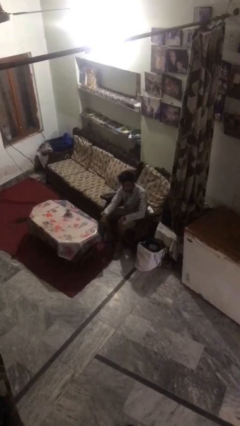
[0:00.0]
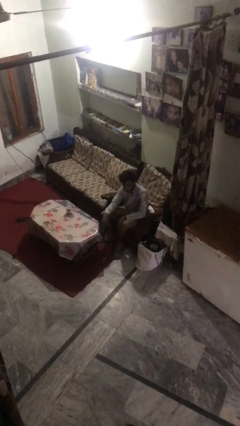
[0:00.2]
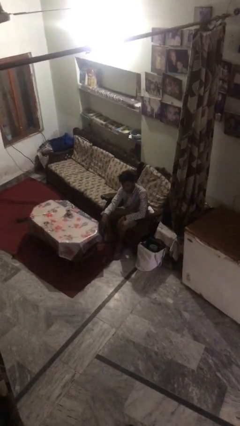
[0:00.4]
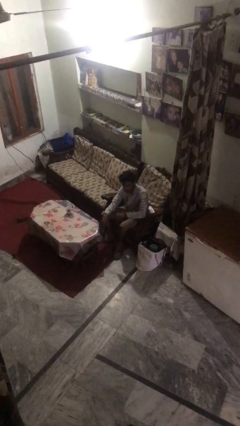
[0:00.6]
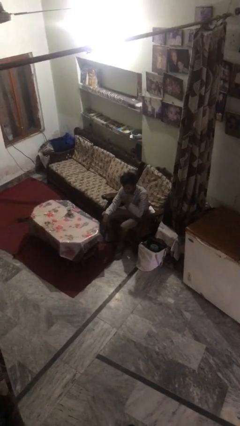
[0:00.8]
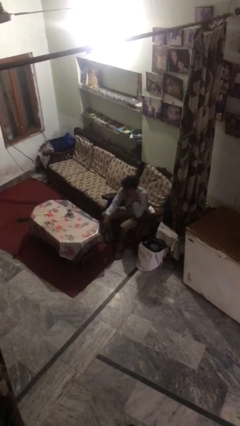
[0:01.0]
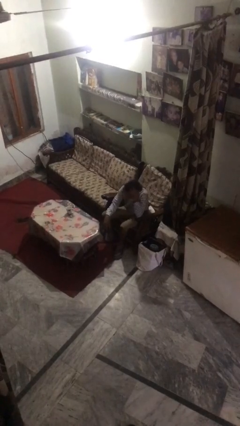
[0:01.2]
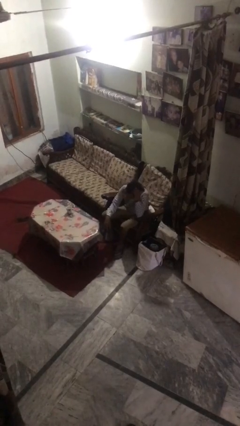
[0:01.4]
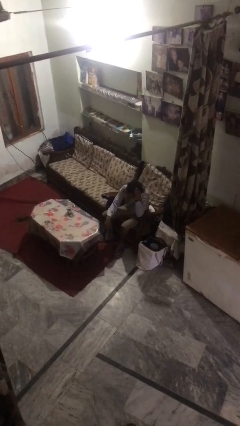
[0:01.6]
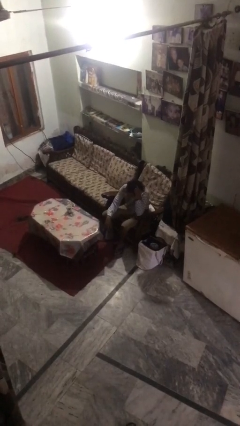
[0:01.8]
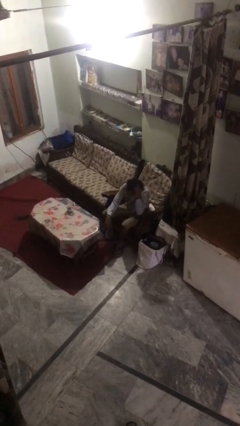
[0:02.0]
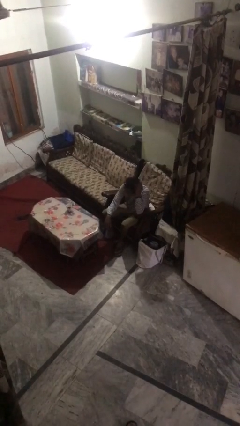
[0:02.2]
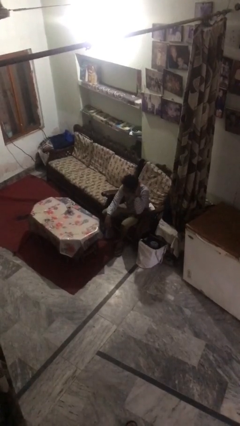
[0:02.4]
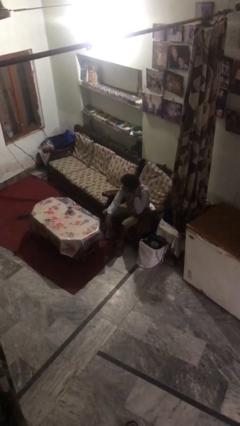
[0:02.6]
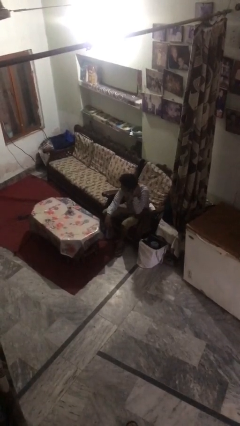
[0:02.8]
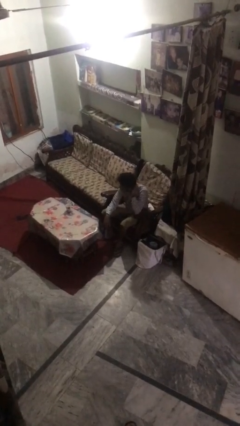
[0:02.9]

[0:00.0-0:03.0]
person strokes hair

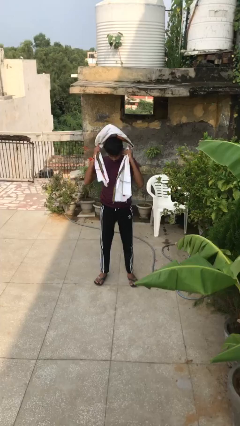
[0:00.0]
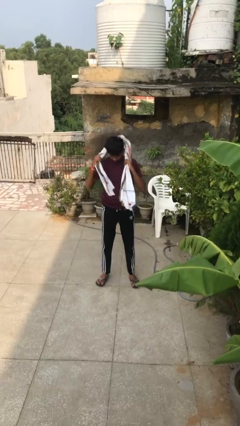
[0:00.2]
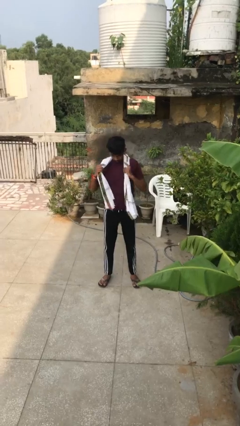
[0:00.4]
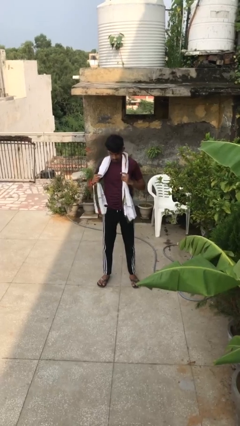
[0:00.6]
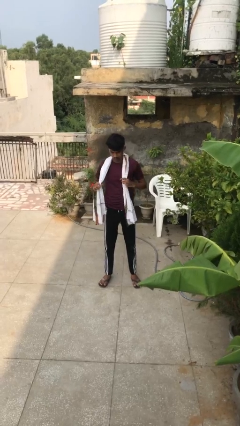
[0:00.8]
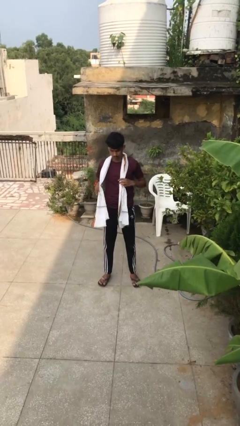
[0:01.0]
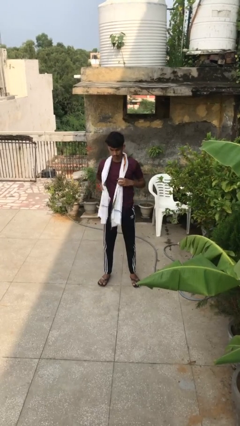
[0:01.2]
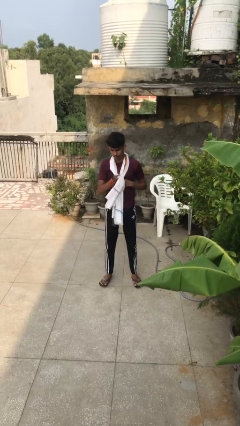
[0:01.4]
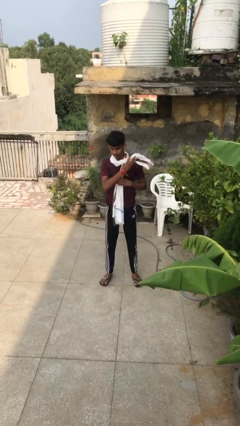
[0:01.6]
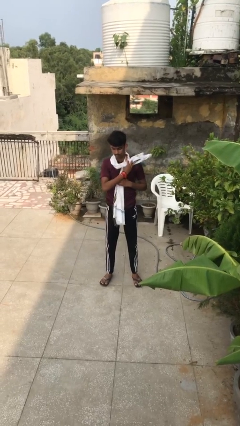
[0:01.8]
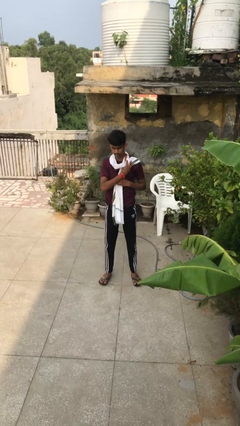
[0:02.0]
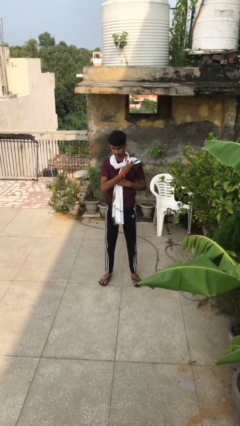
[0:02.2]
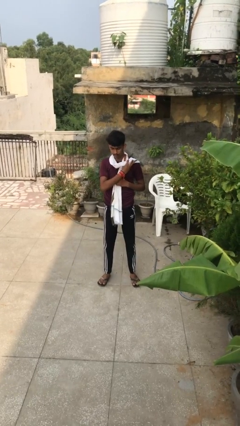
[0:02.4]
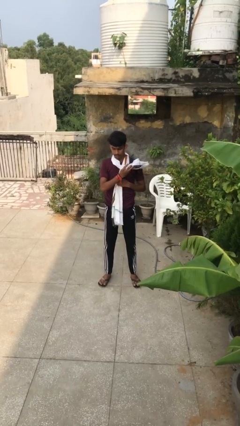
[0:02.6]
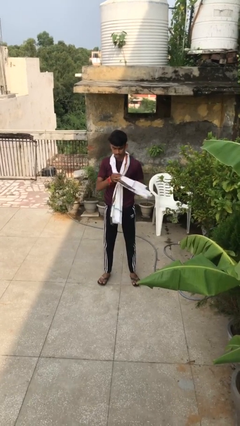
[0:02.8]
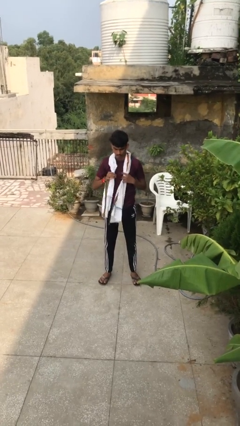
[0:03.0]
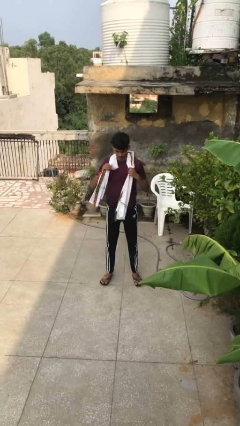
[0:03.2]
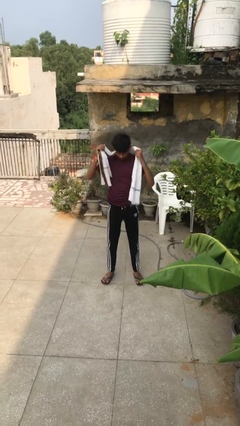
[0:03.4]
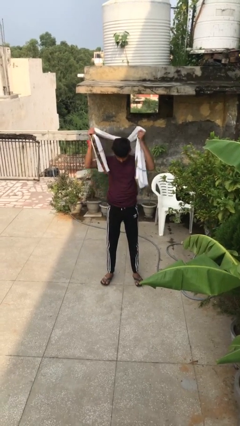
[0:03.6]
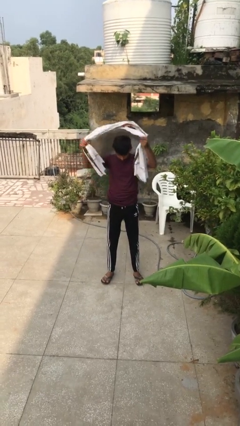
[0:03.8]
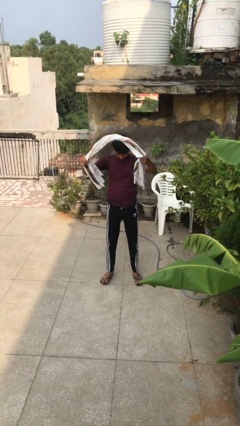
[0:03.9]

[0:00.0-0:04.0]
person puts on shoes

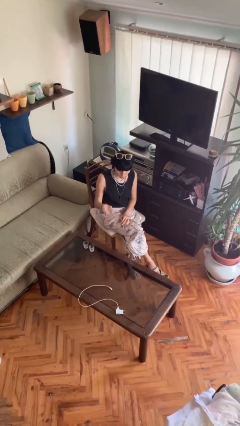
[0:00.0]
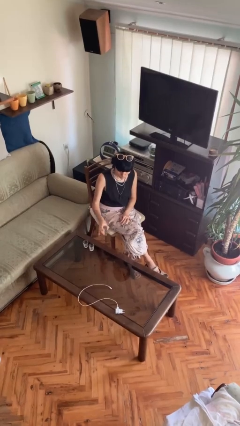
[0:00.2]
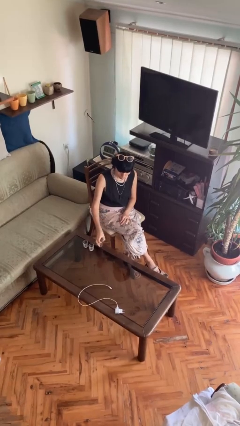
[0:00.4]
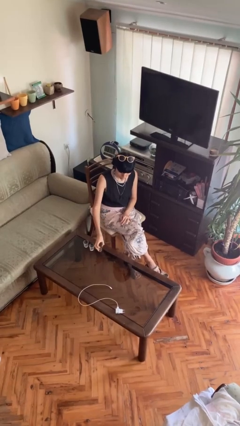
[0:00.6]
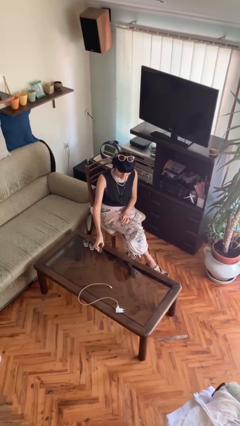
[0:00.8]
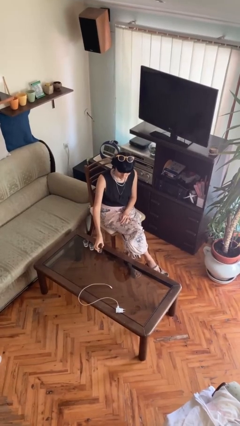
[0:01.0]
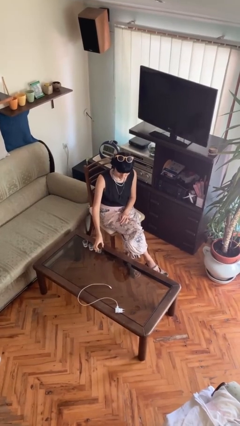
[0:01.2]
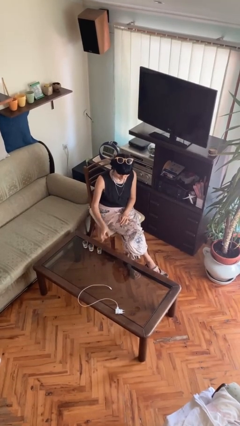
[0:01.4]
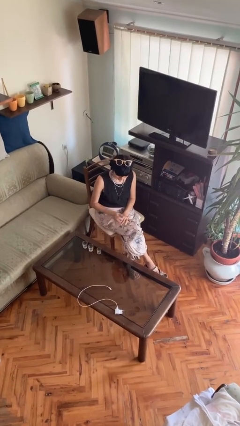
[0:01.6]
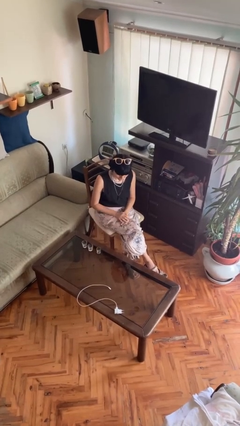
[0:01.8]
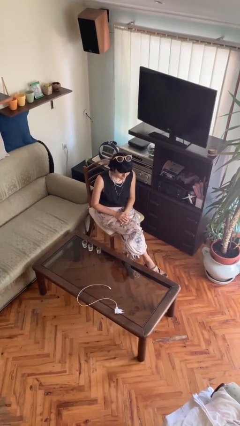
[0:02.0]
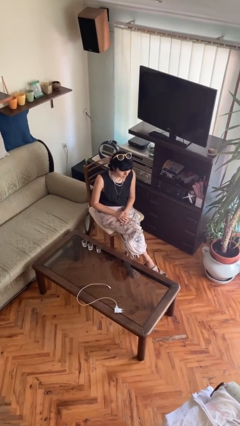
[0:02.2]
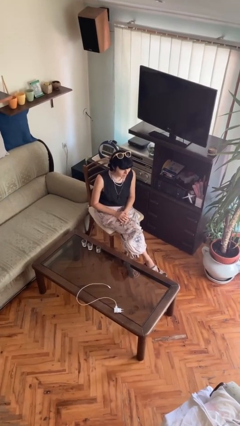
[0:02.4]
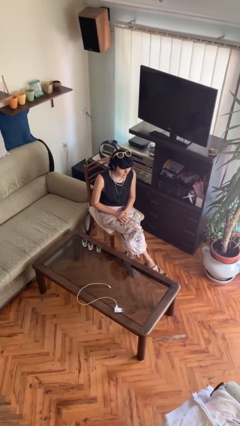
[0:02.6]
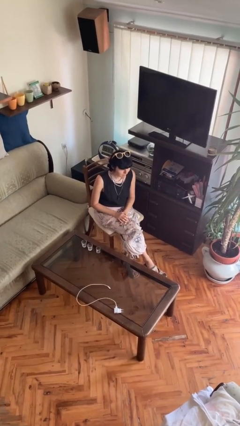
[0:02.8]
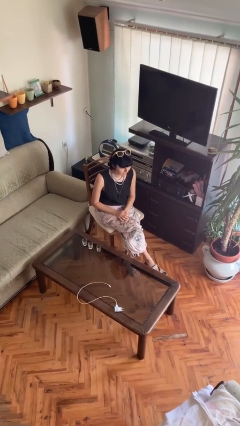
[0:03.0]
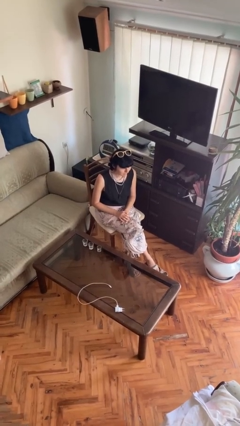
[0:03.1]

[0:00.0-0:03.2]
person puts down object on table

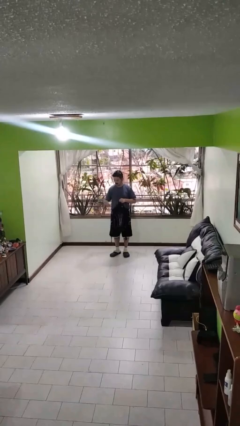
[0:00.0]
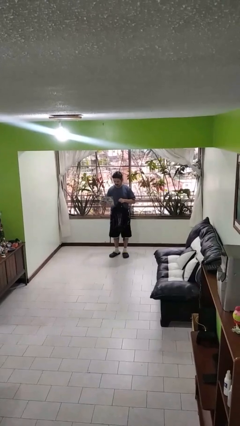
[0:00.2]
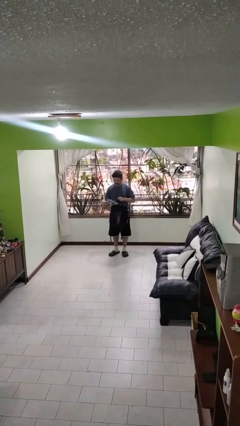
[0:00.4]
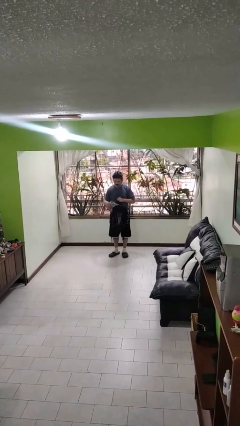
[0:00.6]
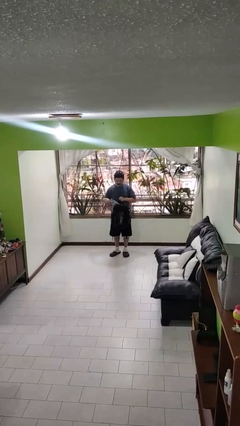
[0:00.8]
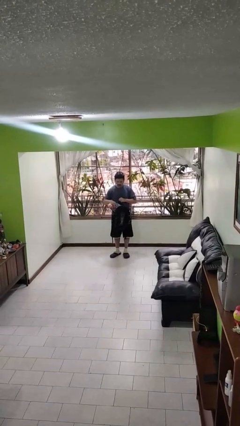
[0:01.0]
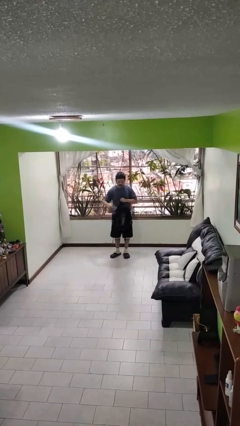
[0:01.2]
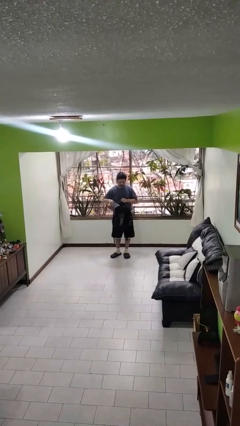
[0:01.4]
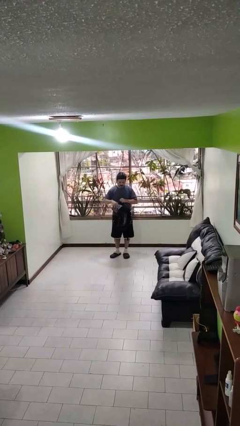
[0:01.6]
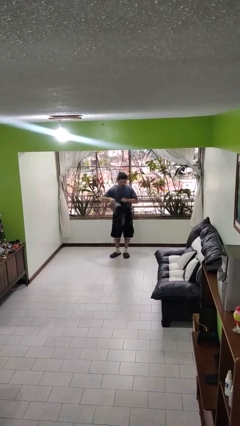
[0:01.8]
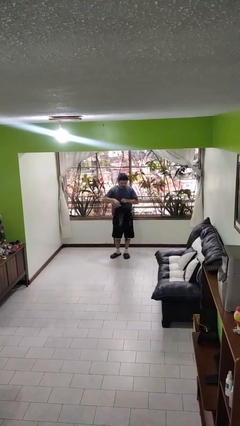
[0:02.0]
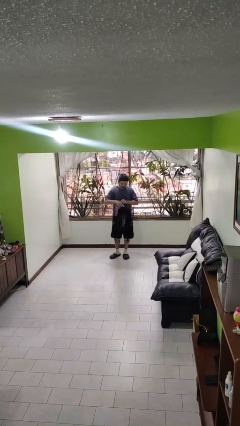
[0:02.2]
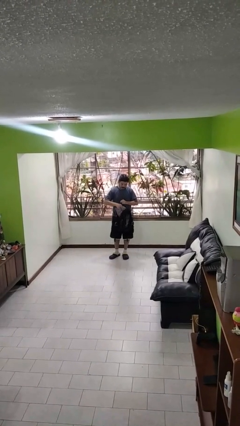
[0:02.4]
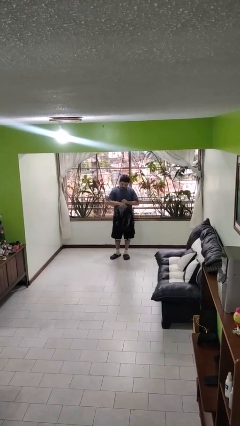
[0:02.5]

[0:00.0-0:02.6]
person puts object into backpack

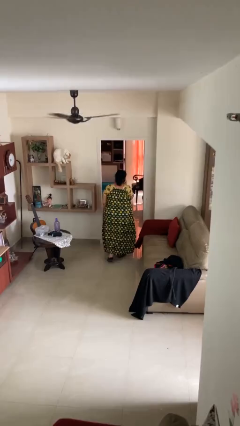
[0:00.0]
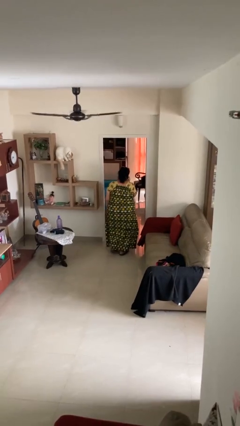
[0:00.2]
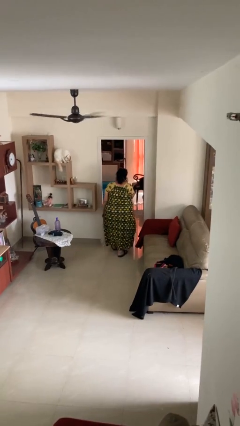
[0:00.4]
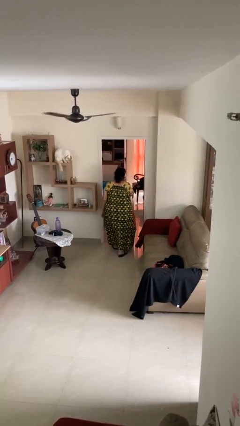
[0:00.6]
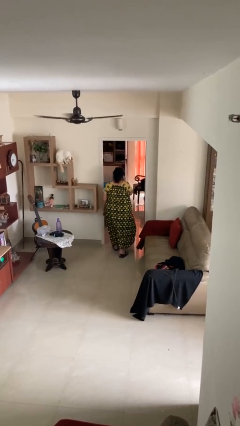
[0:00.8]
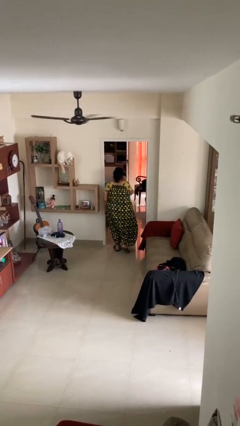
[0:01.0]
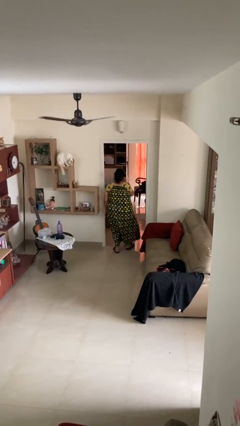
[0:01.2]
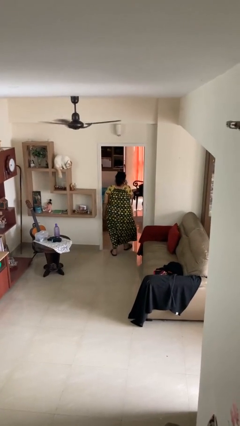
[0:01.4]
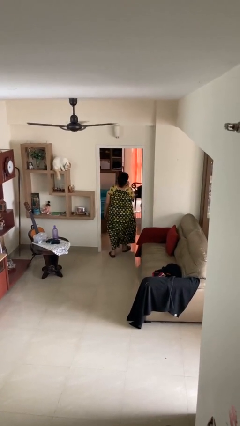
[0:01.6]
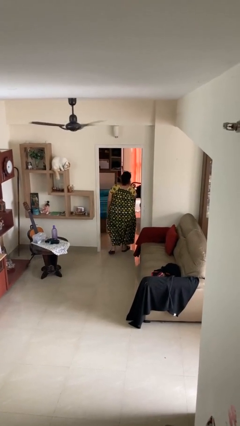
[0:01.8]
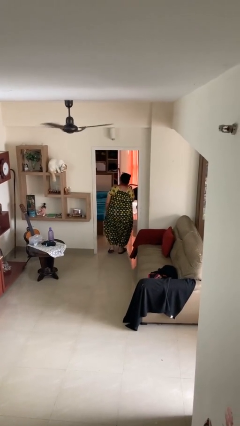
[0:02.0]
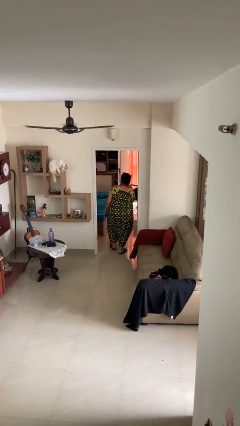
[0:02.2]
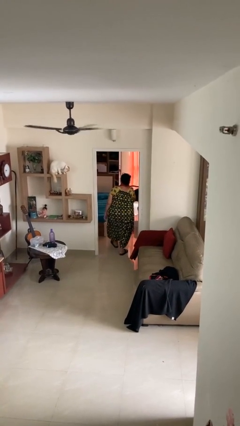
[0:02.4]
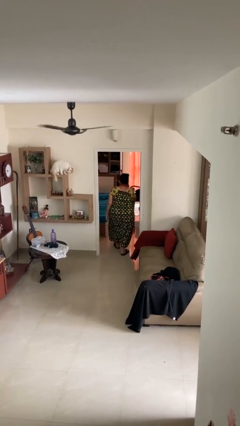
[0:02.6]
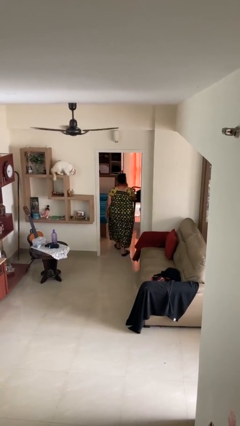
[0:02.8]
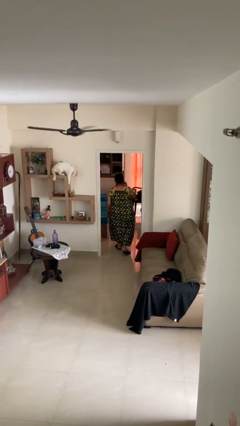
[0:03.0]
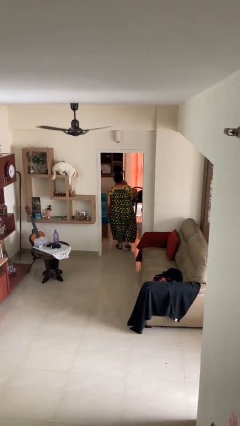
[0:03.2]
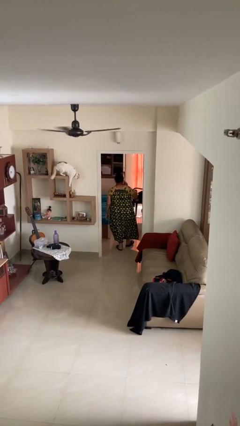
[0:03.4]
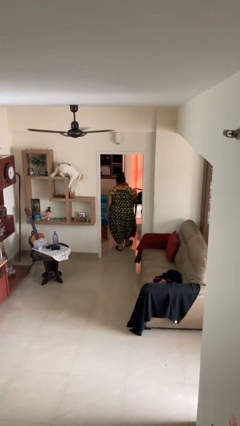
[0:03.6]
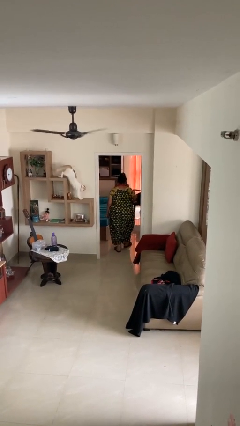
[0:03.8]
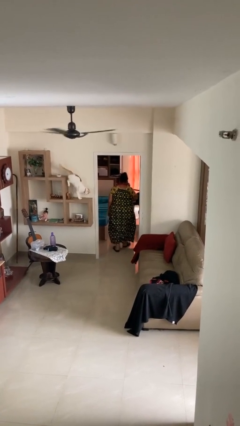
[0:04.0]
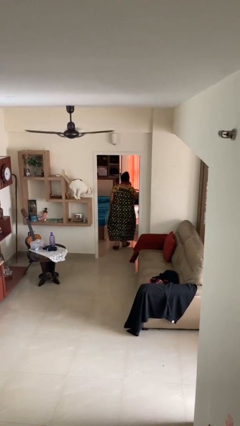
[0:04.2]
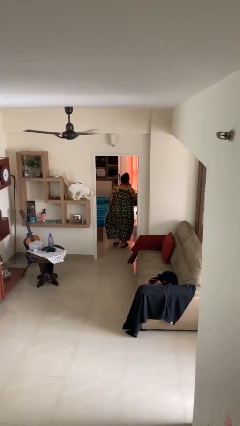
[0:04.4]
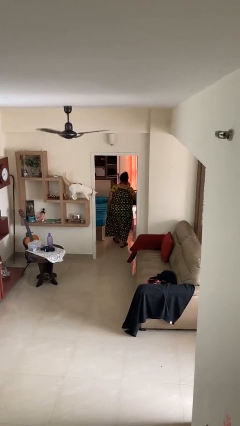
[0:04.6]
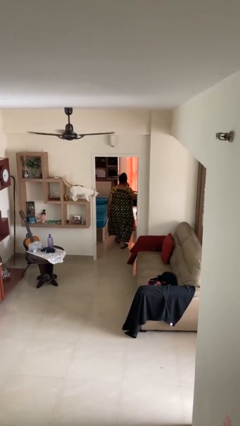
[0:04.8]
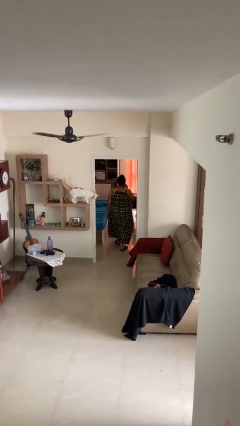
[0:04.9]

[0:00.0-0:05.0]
person exits scene through structure
